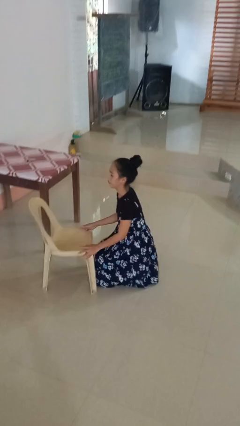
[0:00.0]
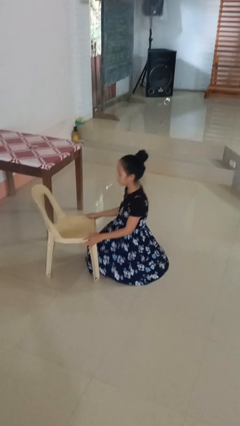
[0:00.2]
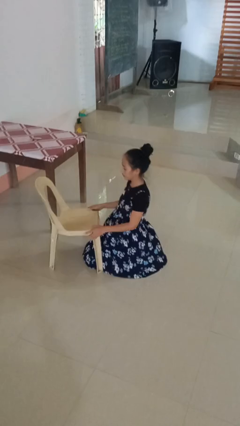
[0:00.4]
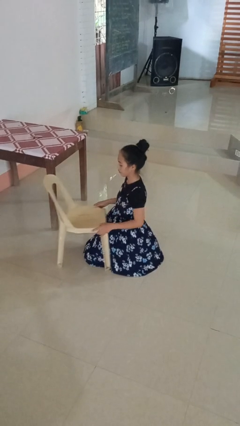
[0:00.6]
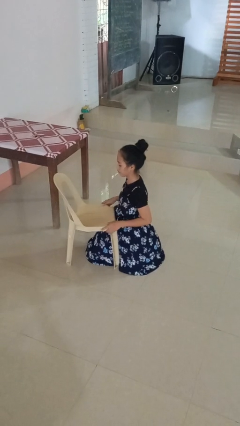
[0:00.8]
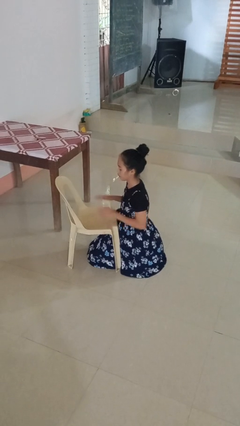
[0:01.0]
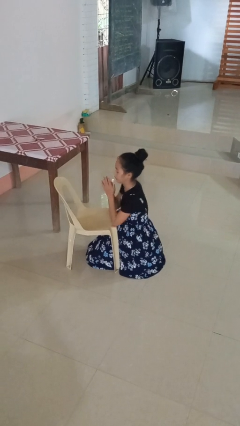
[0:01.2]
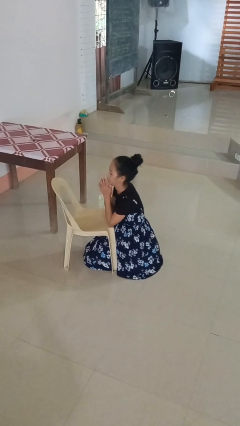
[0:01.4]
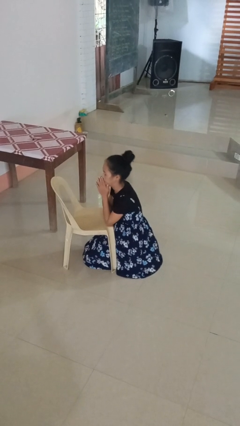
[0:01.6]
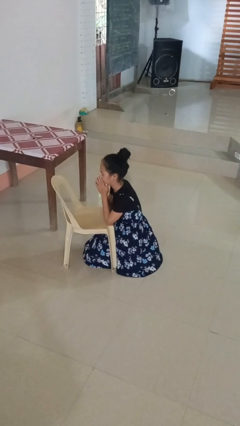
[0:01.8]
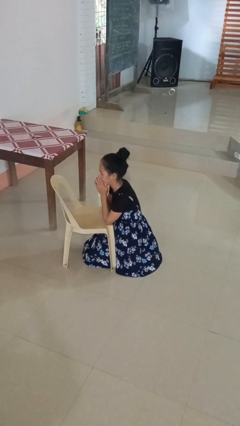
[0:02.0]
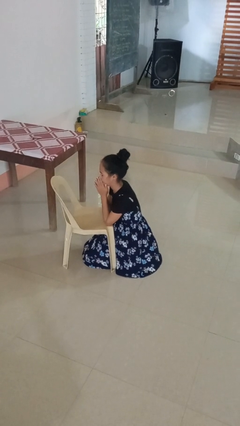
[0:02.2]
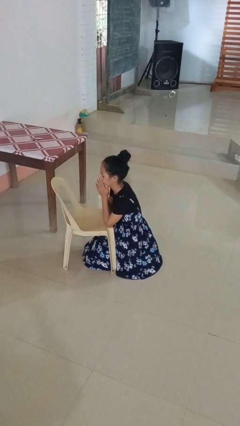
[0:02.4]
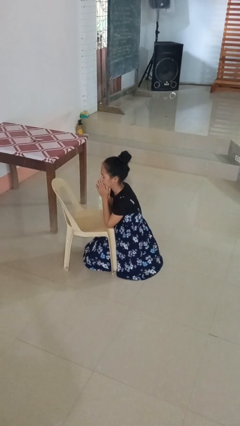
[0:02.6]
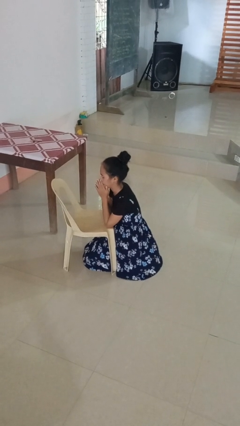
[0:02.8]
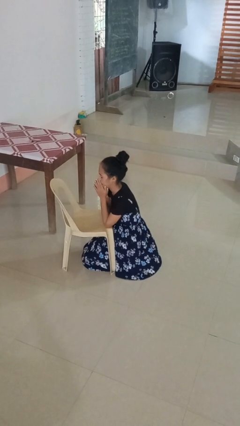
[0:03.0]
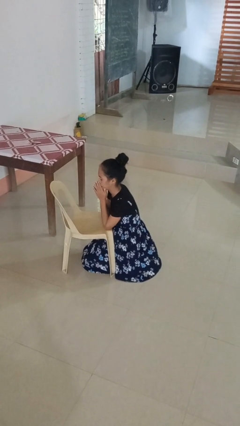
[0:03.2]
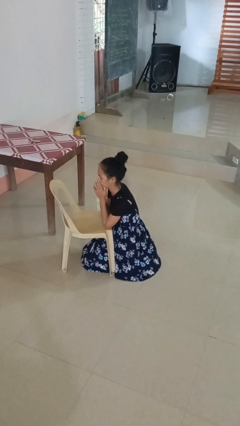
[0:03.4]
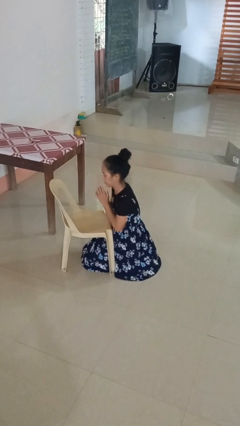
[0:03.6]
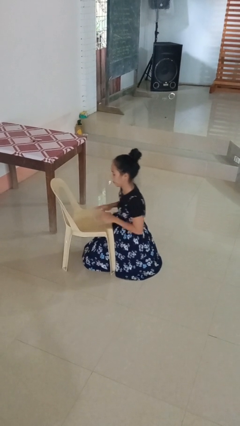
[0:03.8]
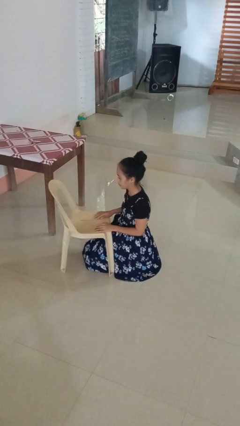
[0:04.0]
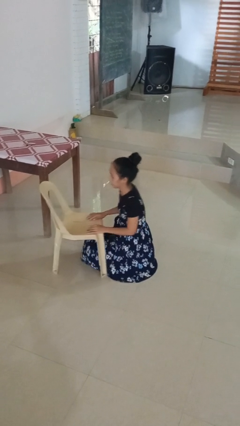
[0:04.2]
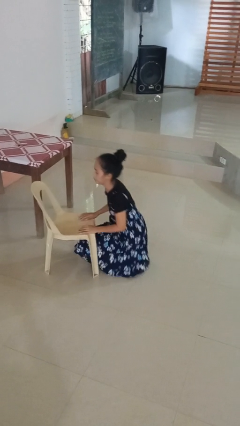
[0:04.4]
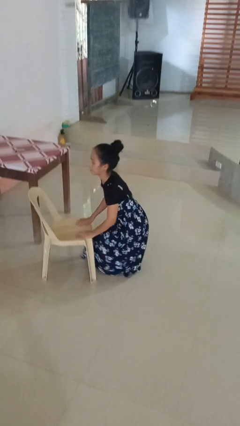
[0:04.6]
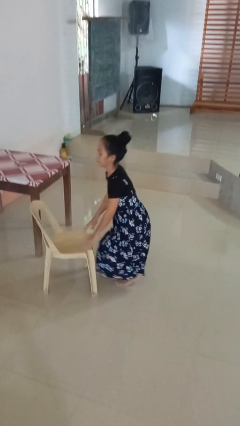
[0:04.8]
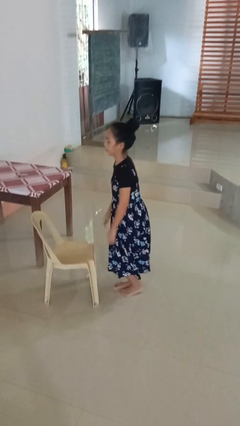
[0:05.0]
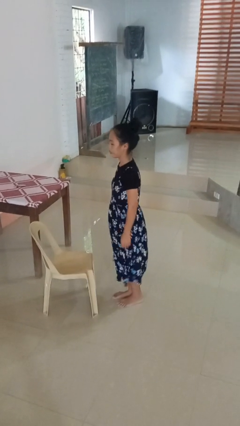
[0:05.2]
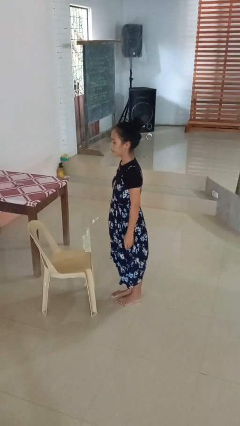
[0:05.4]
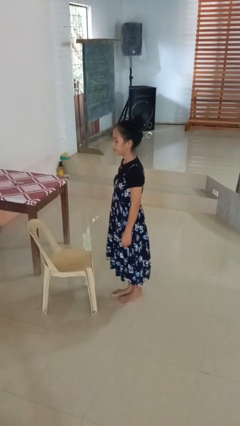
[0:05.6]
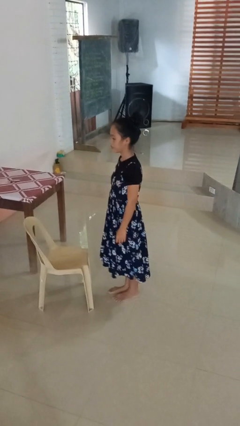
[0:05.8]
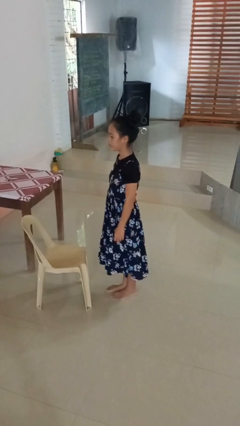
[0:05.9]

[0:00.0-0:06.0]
person prays

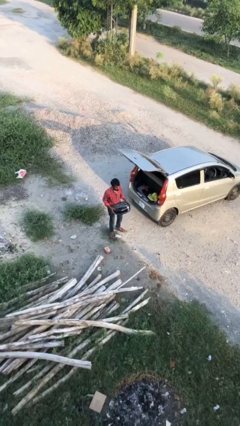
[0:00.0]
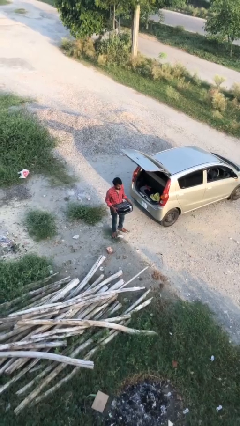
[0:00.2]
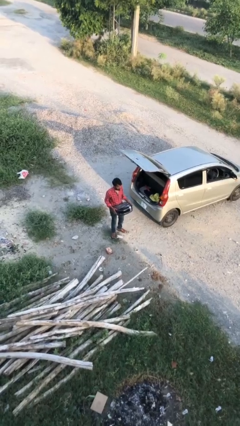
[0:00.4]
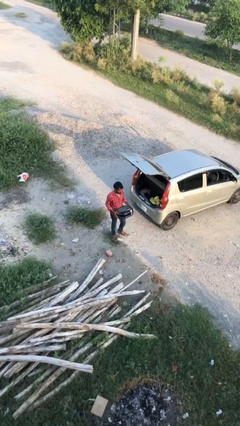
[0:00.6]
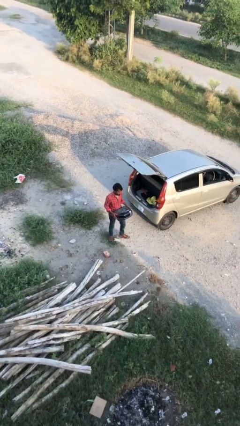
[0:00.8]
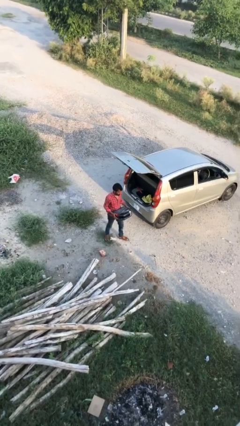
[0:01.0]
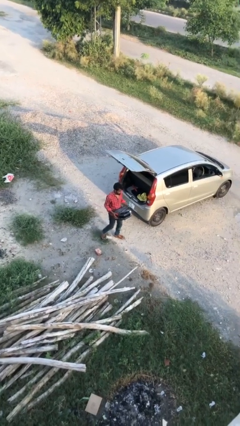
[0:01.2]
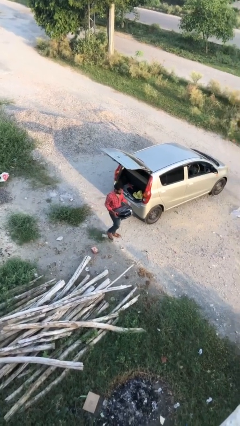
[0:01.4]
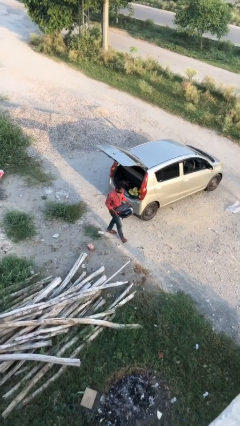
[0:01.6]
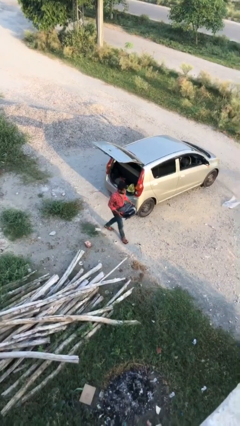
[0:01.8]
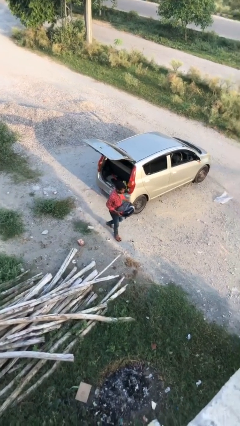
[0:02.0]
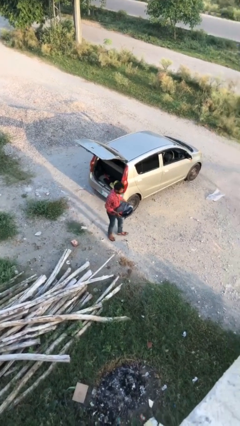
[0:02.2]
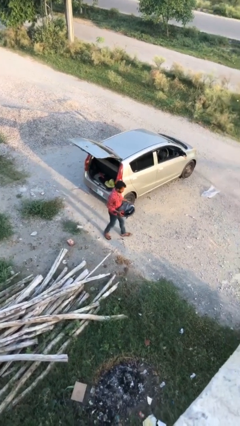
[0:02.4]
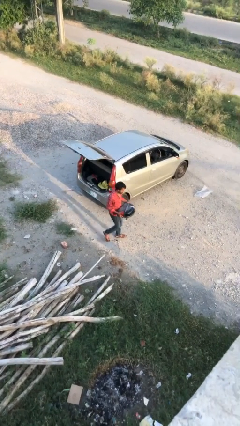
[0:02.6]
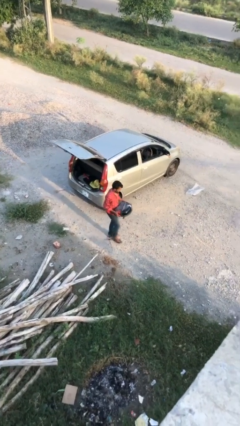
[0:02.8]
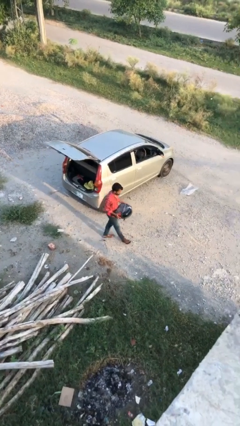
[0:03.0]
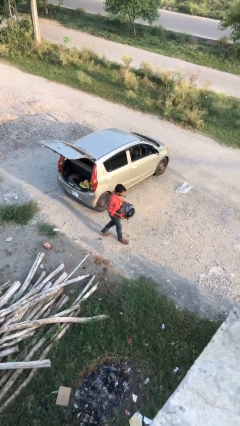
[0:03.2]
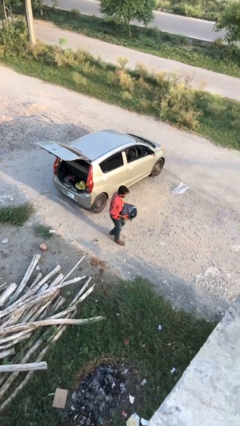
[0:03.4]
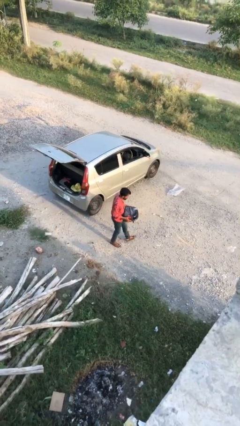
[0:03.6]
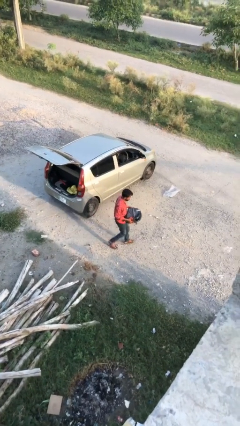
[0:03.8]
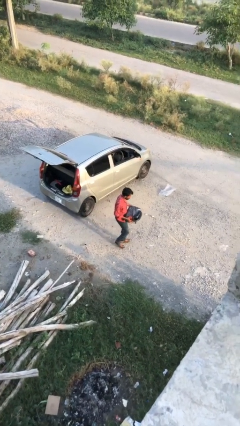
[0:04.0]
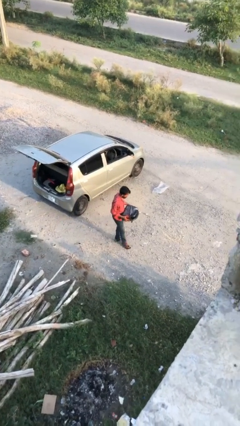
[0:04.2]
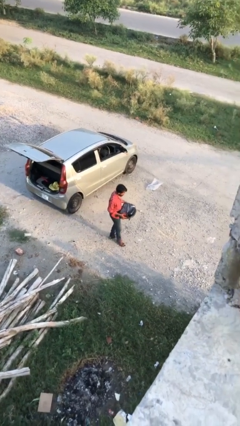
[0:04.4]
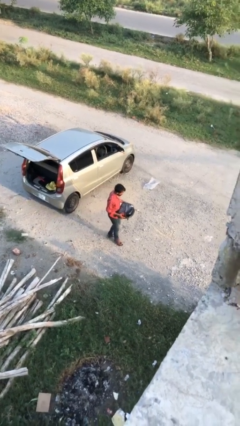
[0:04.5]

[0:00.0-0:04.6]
person carries heavy object

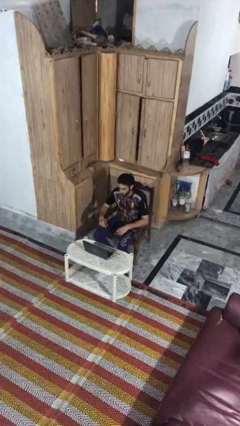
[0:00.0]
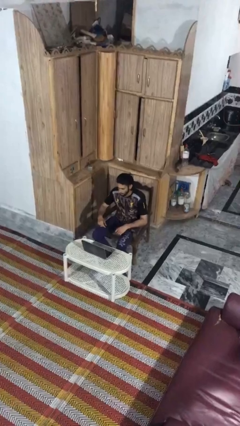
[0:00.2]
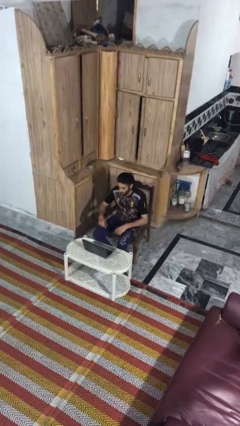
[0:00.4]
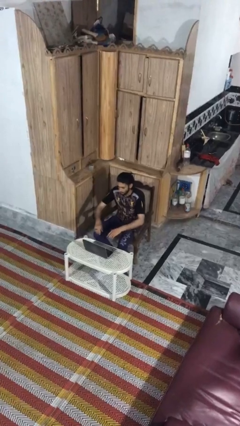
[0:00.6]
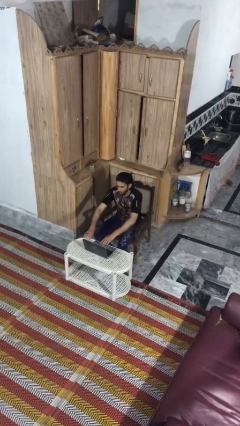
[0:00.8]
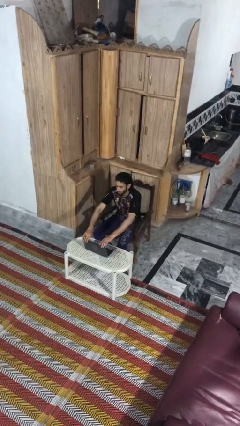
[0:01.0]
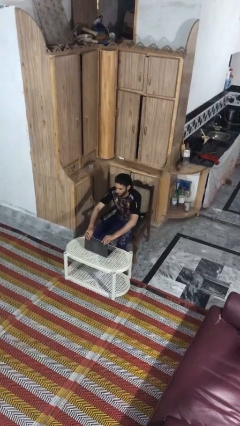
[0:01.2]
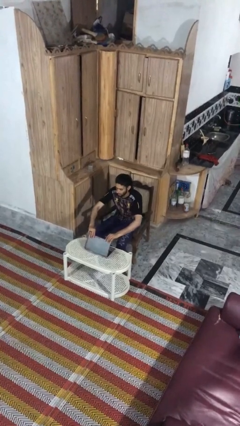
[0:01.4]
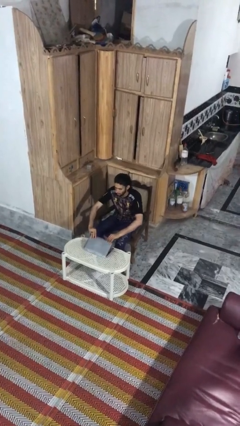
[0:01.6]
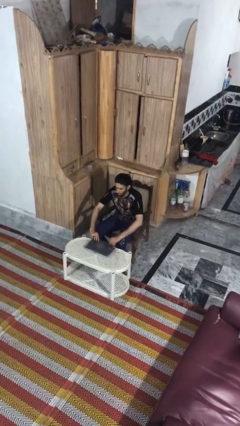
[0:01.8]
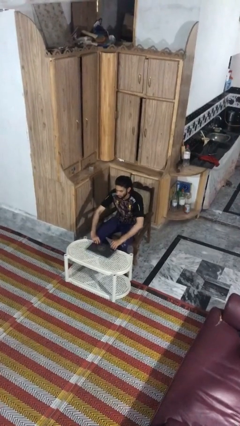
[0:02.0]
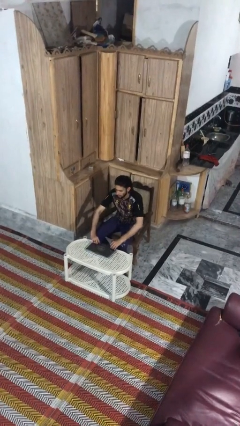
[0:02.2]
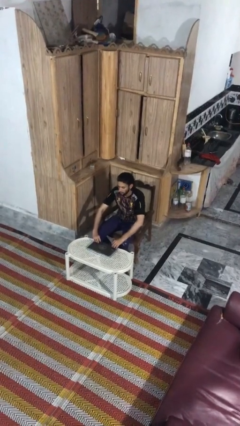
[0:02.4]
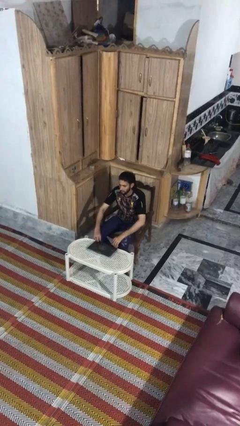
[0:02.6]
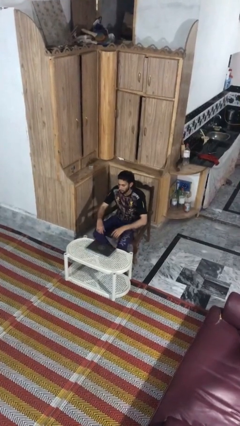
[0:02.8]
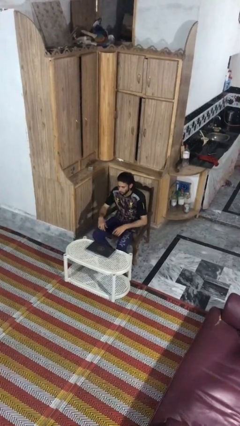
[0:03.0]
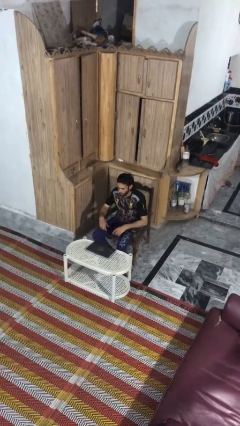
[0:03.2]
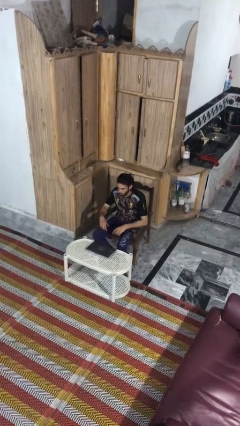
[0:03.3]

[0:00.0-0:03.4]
person closes laptop

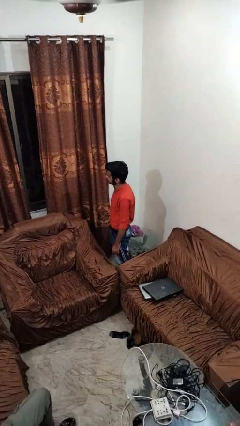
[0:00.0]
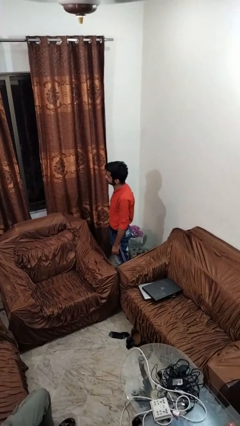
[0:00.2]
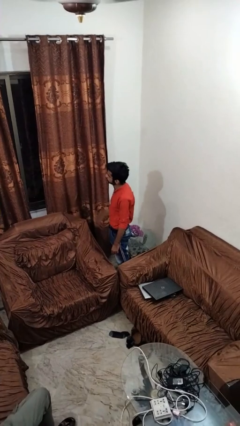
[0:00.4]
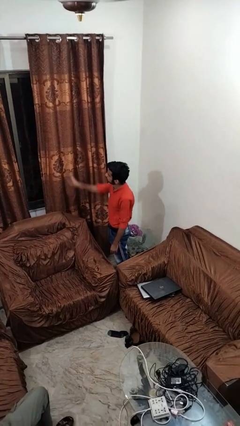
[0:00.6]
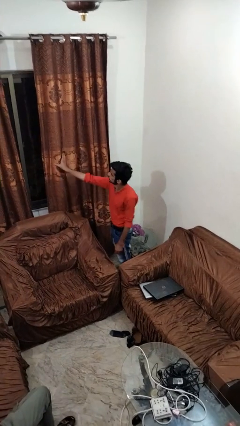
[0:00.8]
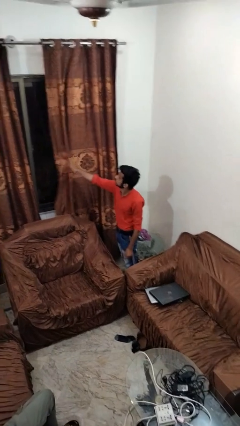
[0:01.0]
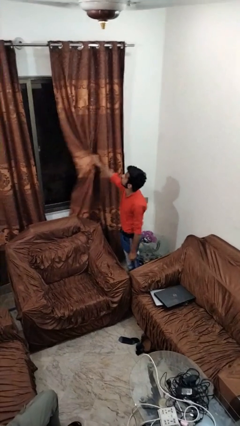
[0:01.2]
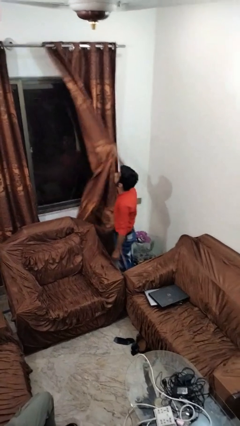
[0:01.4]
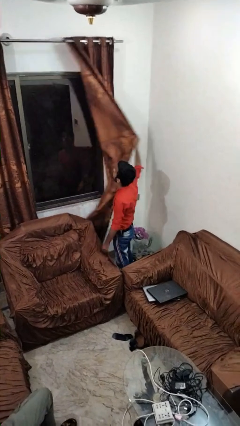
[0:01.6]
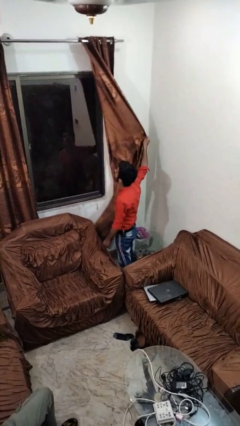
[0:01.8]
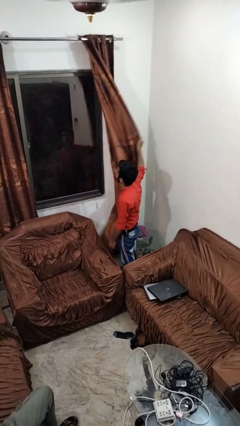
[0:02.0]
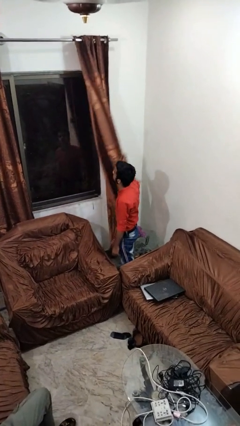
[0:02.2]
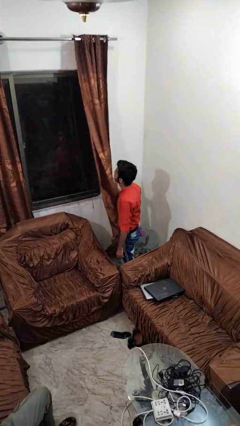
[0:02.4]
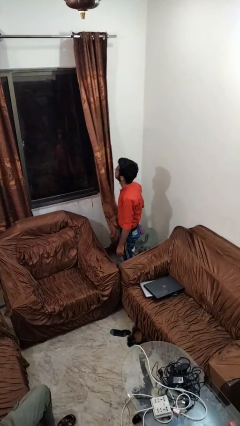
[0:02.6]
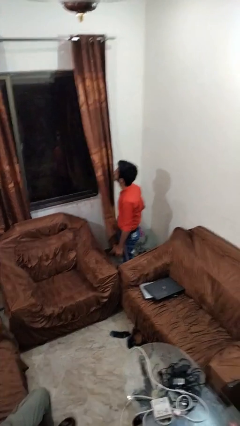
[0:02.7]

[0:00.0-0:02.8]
person opens curtains

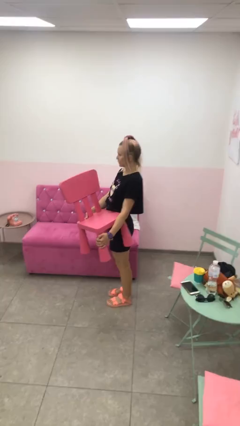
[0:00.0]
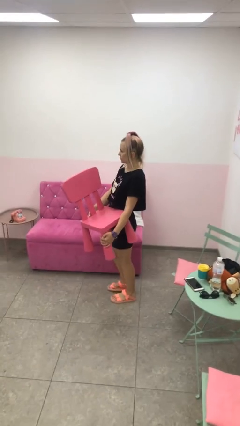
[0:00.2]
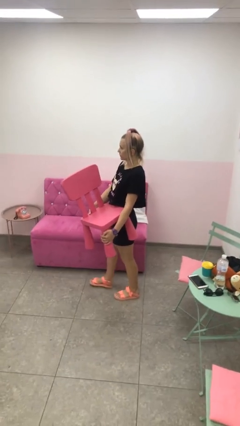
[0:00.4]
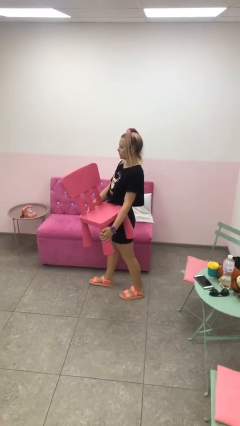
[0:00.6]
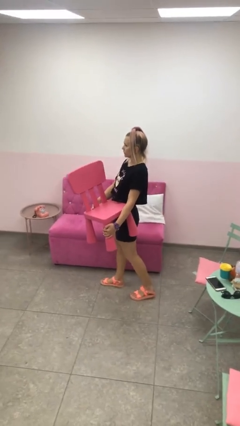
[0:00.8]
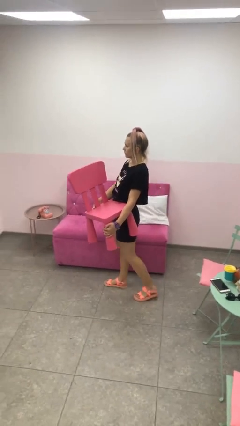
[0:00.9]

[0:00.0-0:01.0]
person carries furniture
